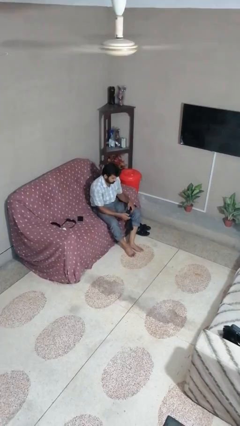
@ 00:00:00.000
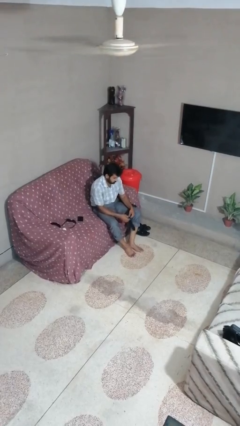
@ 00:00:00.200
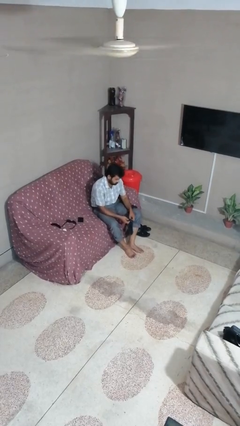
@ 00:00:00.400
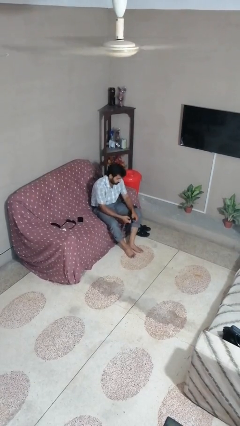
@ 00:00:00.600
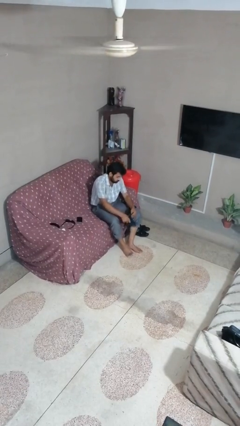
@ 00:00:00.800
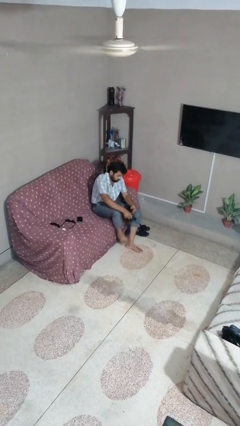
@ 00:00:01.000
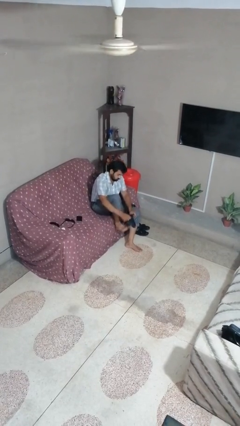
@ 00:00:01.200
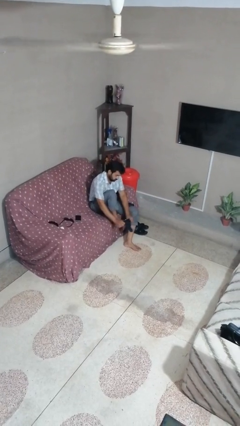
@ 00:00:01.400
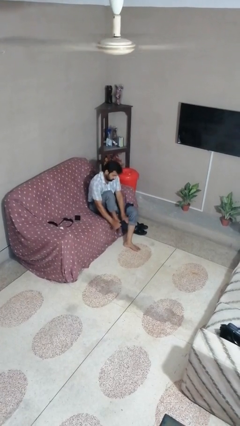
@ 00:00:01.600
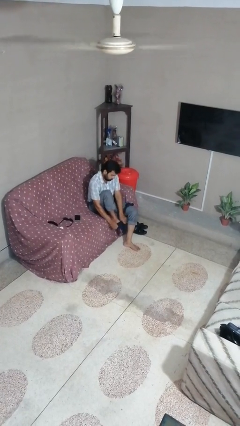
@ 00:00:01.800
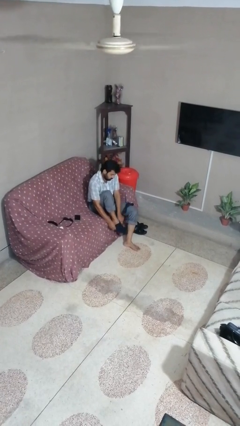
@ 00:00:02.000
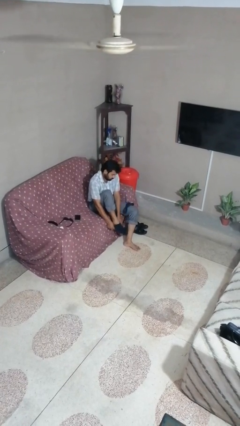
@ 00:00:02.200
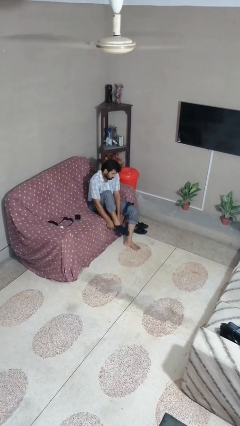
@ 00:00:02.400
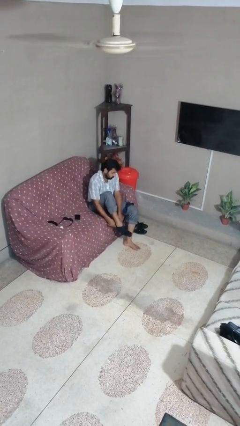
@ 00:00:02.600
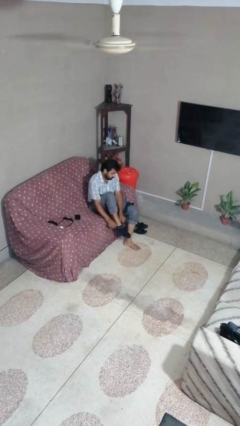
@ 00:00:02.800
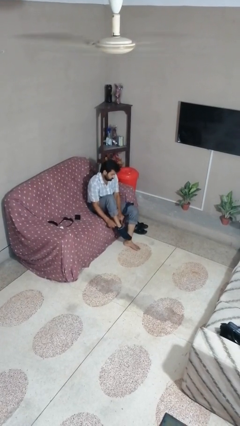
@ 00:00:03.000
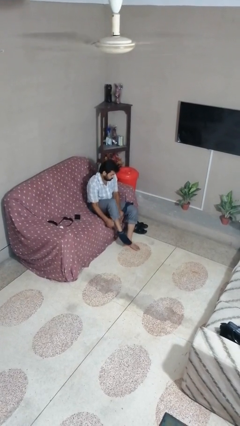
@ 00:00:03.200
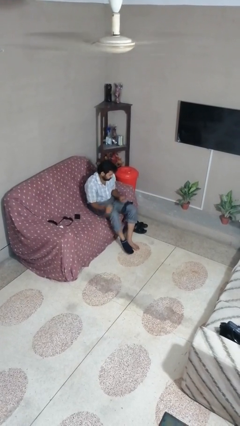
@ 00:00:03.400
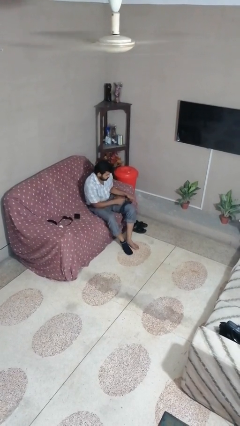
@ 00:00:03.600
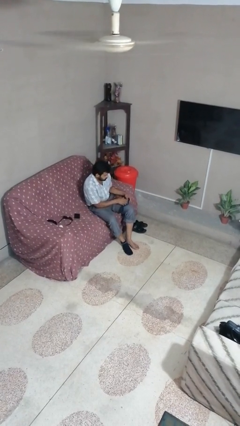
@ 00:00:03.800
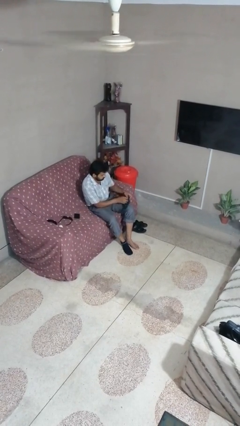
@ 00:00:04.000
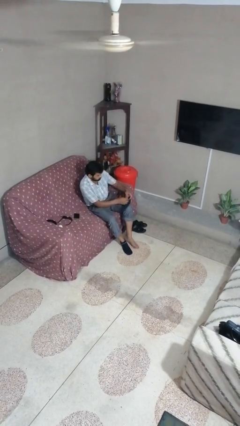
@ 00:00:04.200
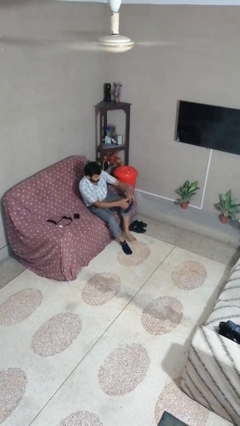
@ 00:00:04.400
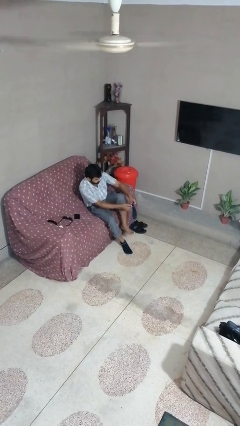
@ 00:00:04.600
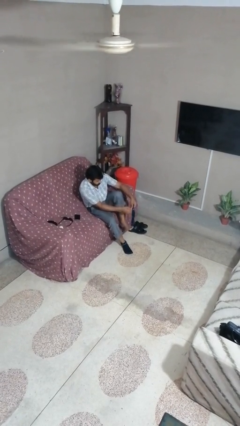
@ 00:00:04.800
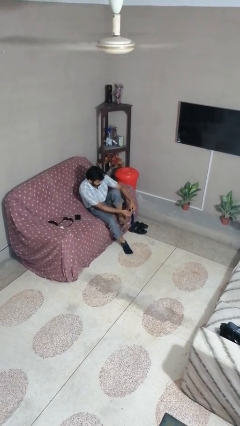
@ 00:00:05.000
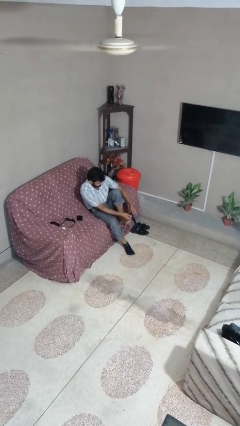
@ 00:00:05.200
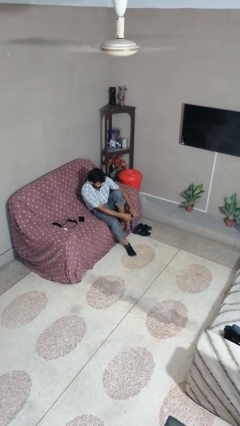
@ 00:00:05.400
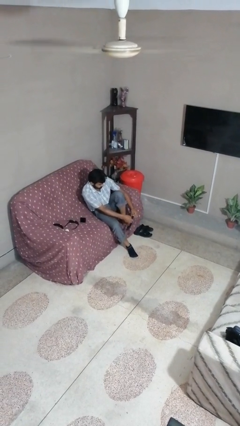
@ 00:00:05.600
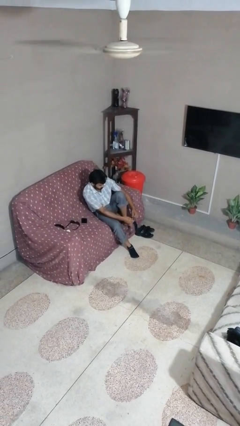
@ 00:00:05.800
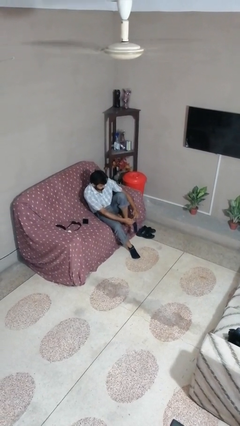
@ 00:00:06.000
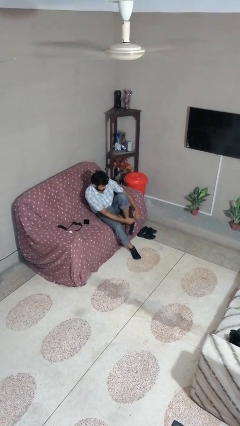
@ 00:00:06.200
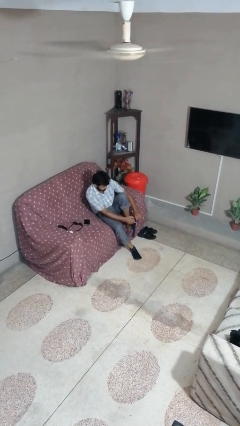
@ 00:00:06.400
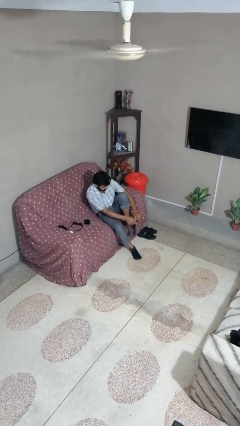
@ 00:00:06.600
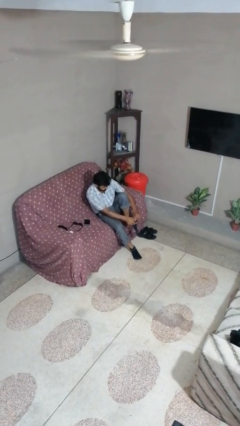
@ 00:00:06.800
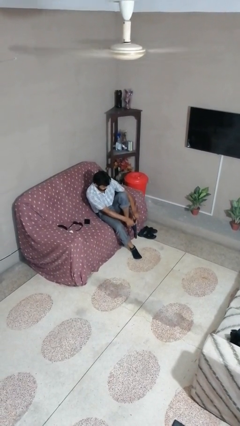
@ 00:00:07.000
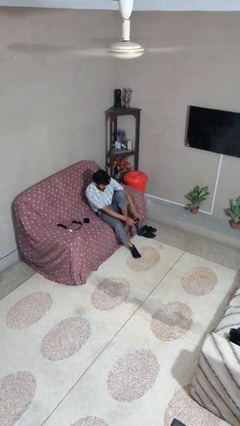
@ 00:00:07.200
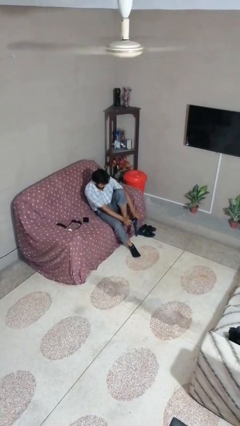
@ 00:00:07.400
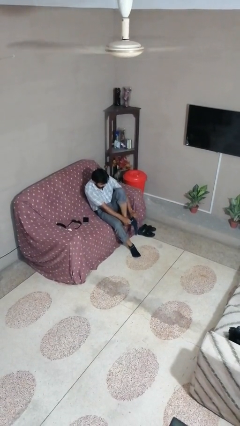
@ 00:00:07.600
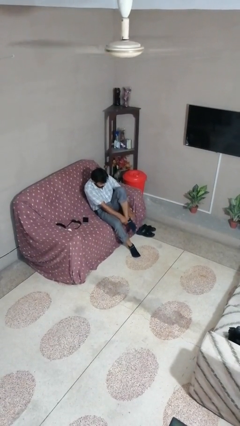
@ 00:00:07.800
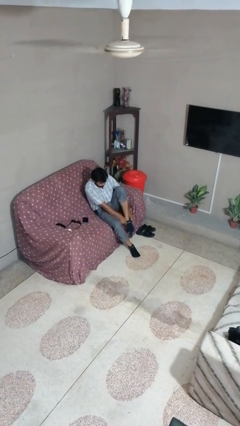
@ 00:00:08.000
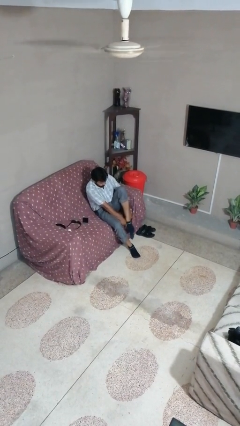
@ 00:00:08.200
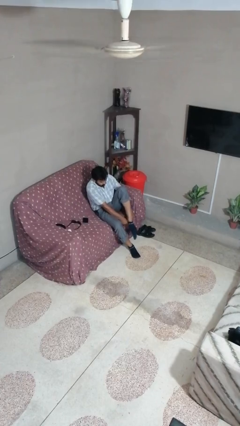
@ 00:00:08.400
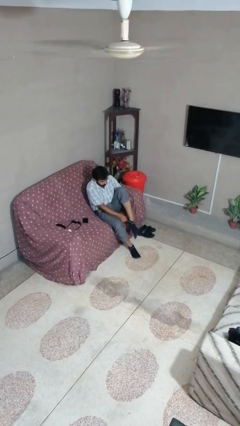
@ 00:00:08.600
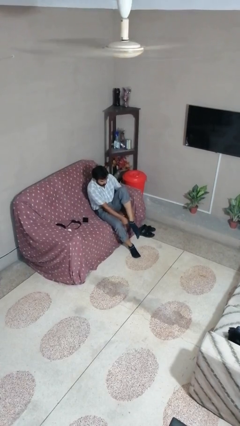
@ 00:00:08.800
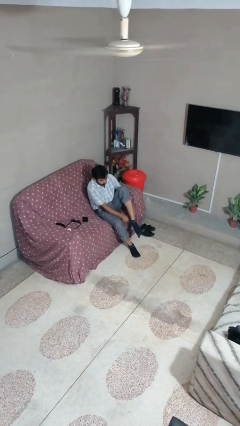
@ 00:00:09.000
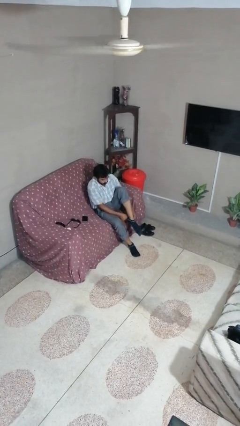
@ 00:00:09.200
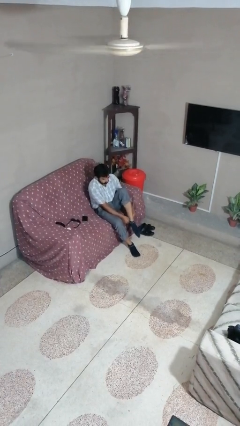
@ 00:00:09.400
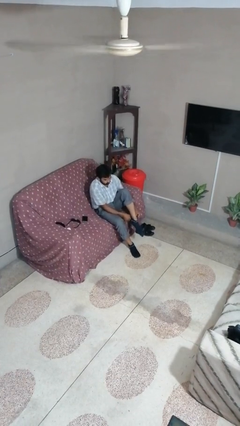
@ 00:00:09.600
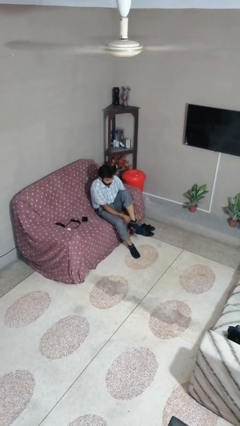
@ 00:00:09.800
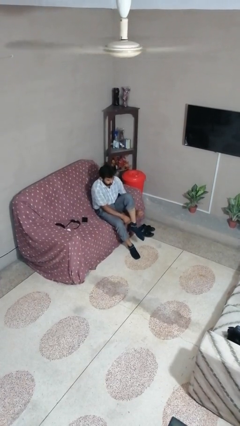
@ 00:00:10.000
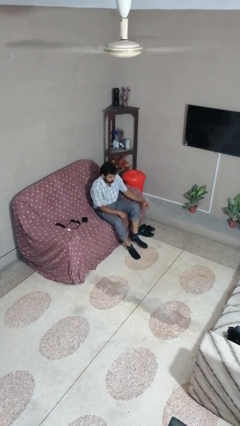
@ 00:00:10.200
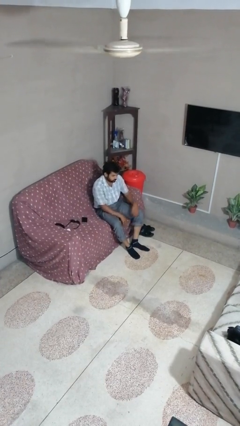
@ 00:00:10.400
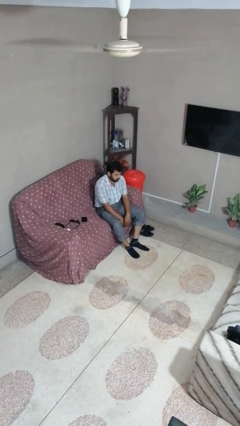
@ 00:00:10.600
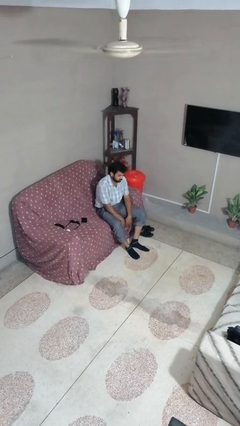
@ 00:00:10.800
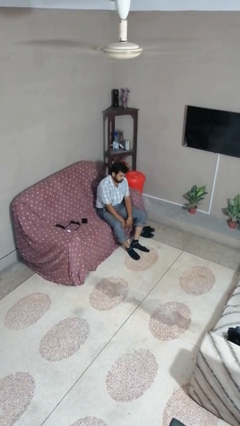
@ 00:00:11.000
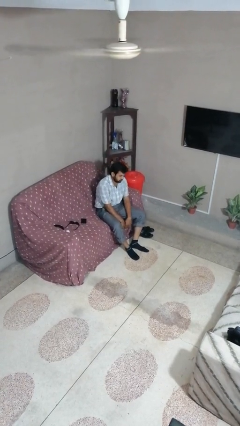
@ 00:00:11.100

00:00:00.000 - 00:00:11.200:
person puts on socks

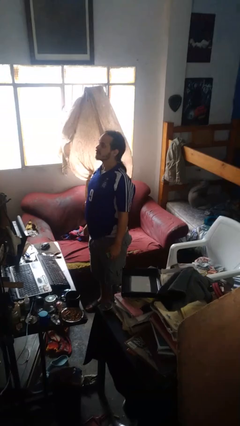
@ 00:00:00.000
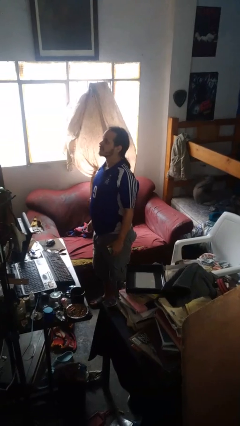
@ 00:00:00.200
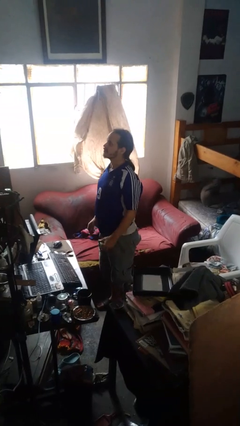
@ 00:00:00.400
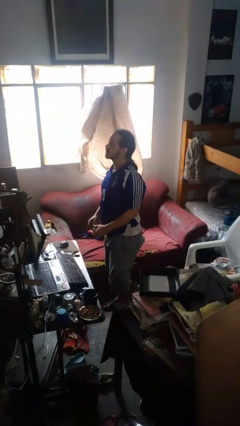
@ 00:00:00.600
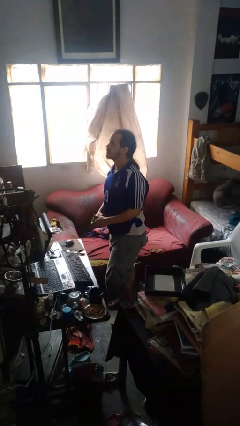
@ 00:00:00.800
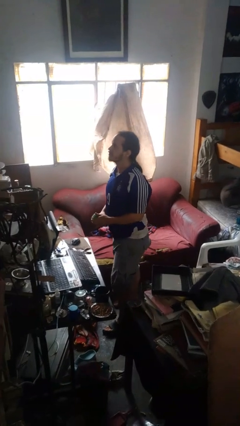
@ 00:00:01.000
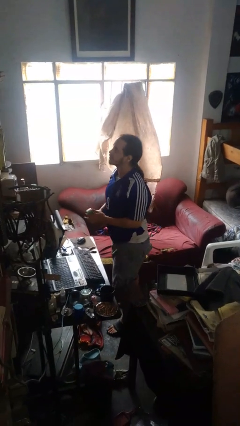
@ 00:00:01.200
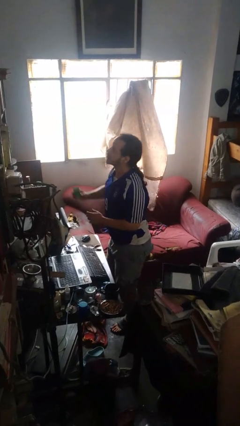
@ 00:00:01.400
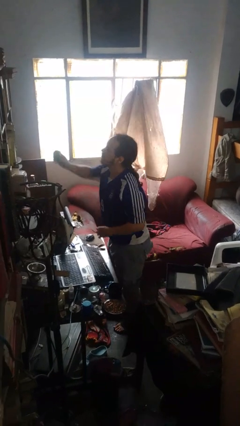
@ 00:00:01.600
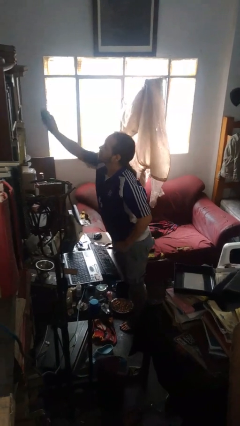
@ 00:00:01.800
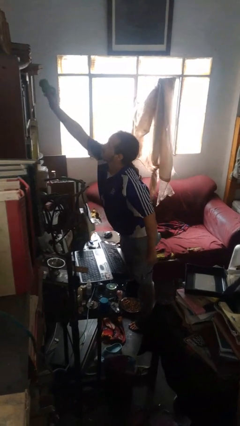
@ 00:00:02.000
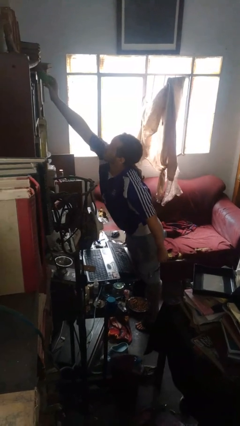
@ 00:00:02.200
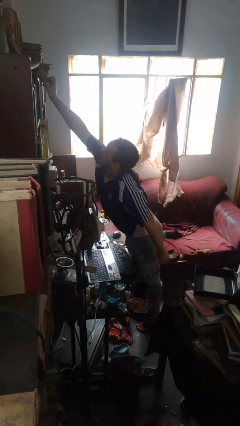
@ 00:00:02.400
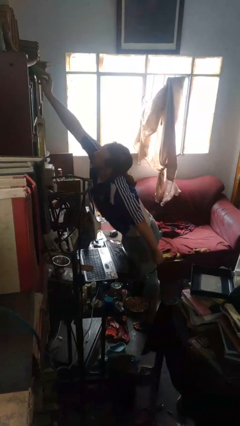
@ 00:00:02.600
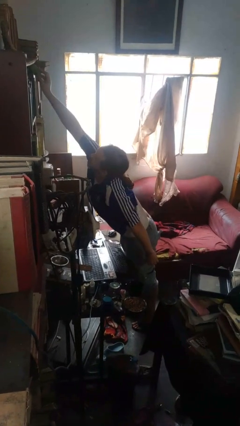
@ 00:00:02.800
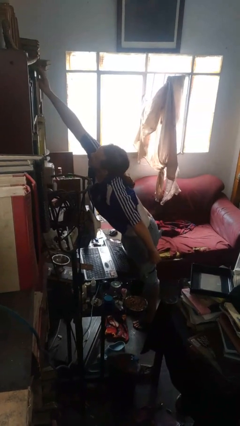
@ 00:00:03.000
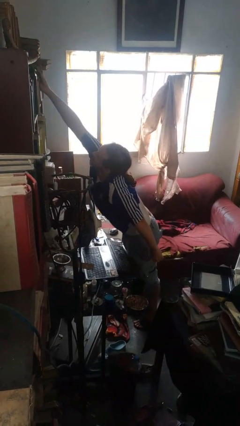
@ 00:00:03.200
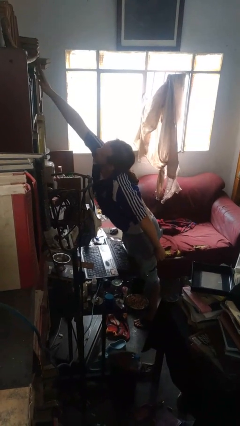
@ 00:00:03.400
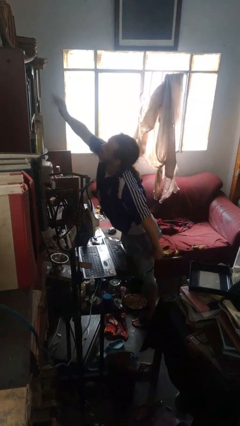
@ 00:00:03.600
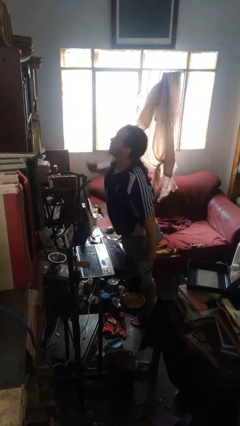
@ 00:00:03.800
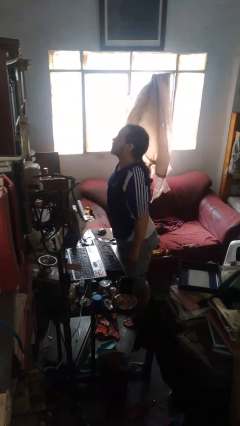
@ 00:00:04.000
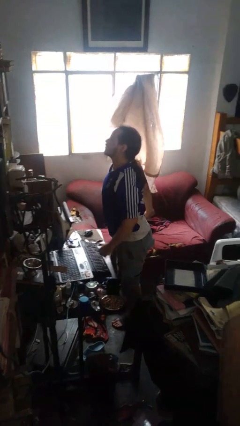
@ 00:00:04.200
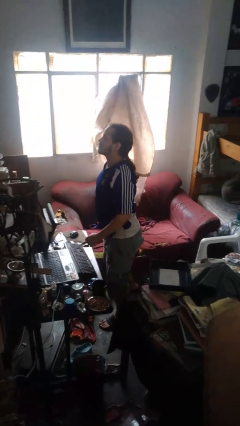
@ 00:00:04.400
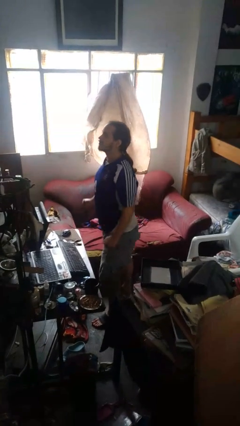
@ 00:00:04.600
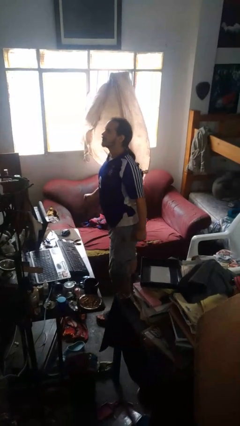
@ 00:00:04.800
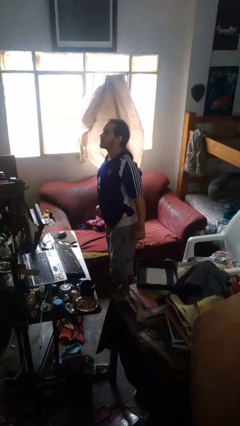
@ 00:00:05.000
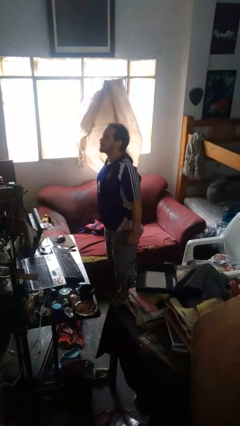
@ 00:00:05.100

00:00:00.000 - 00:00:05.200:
person puts down object on shelf

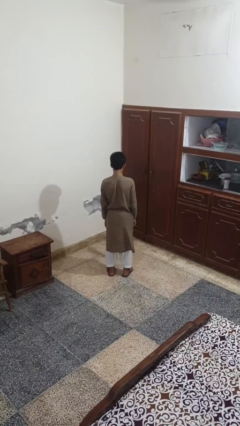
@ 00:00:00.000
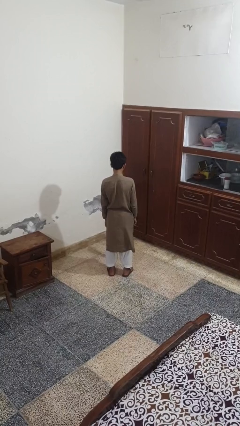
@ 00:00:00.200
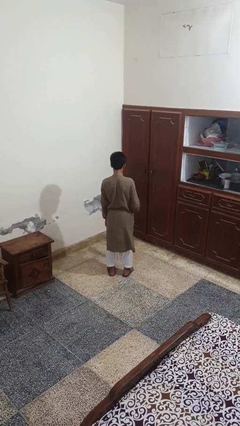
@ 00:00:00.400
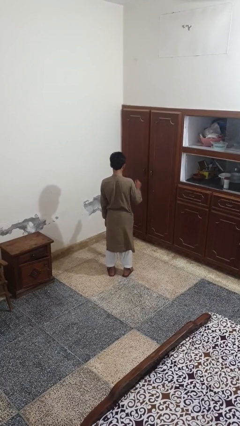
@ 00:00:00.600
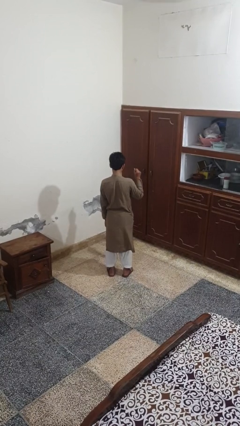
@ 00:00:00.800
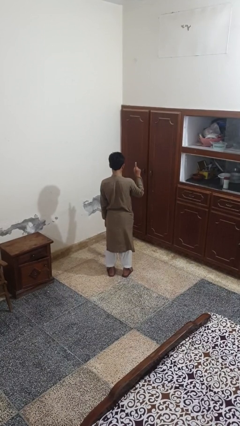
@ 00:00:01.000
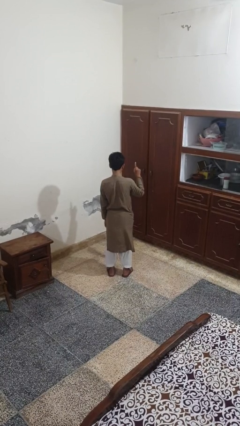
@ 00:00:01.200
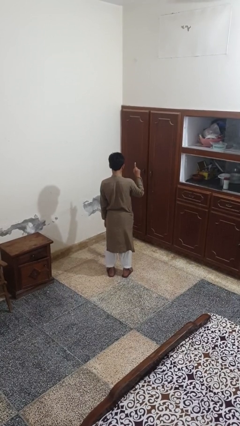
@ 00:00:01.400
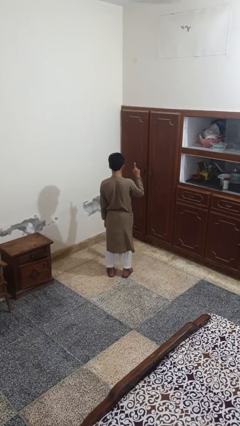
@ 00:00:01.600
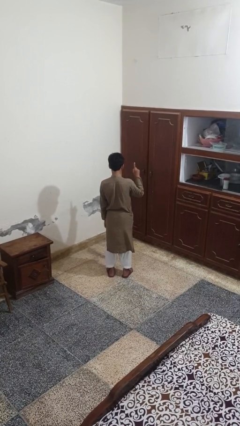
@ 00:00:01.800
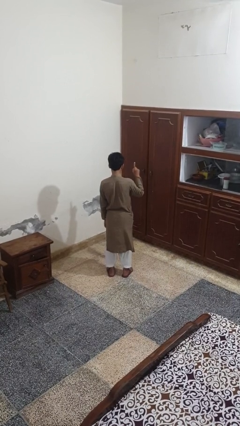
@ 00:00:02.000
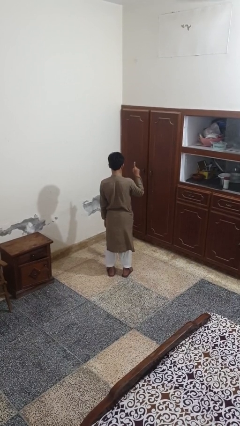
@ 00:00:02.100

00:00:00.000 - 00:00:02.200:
person gestures number one
